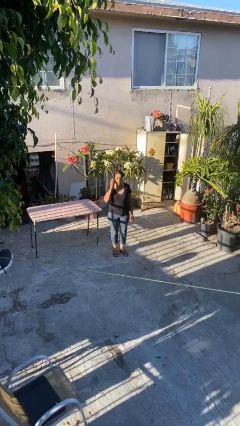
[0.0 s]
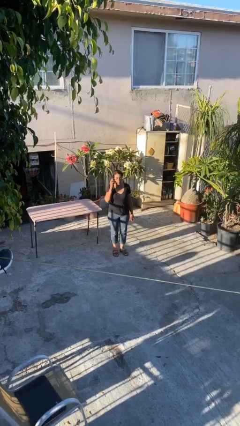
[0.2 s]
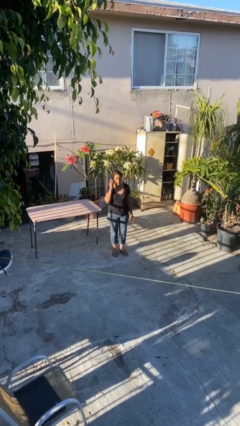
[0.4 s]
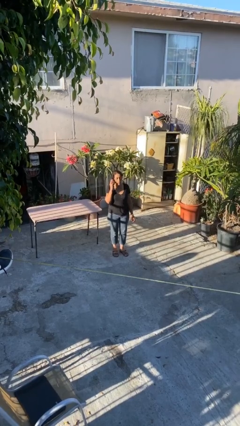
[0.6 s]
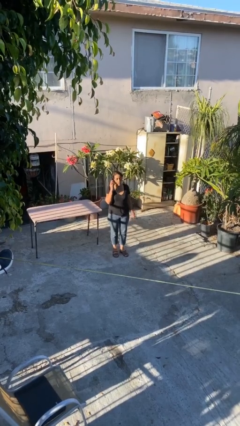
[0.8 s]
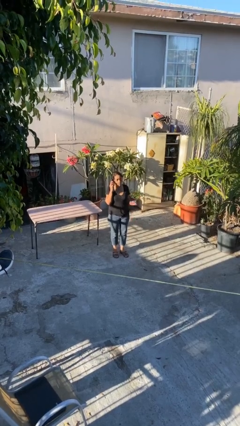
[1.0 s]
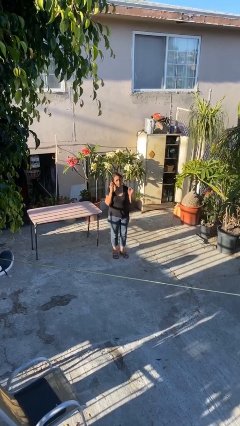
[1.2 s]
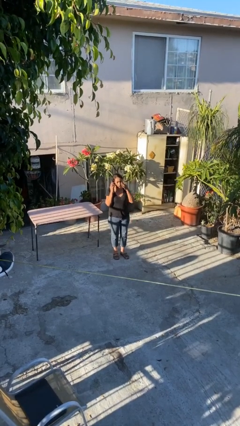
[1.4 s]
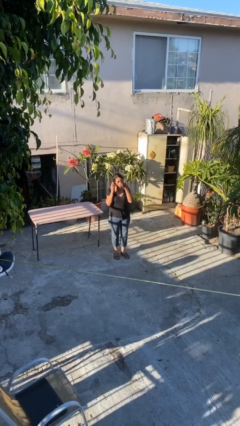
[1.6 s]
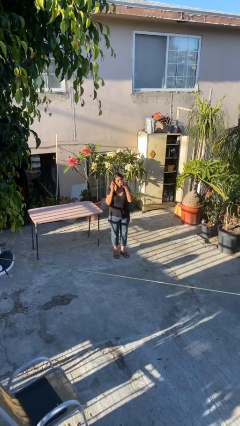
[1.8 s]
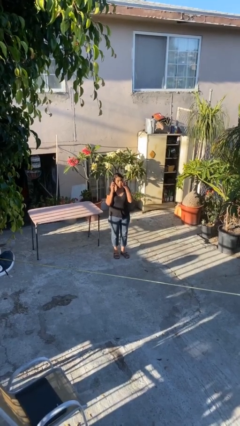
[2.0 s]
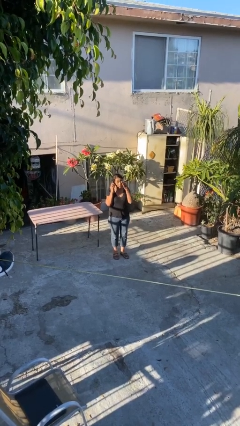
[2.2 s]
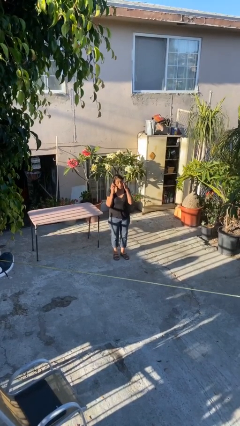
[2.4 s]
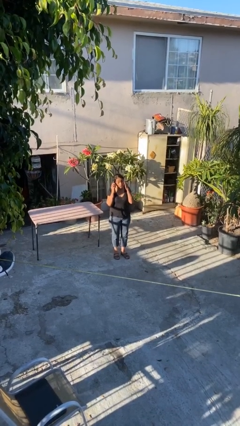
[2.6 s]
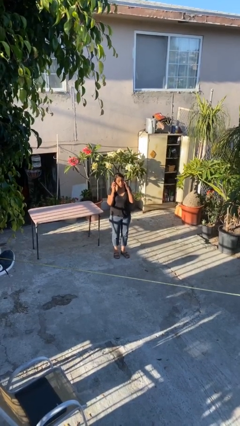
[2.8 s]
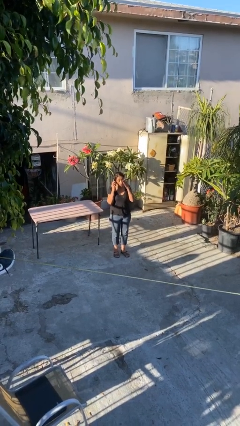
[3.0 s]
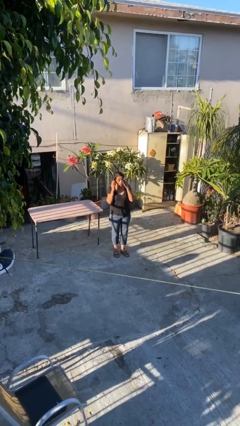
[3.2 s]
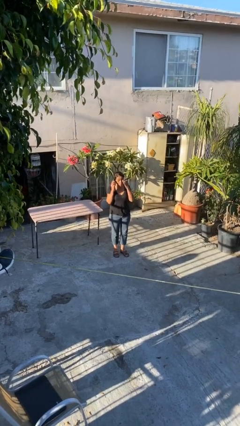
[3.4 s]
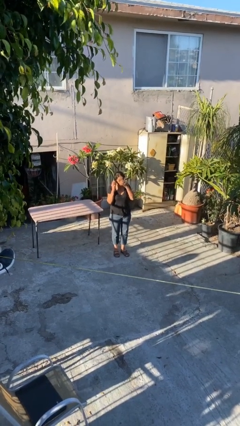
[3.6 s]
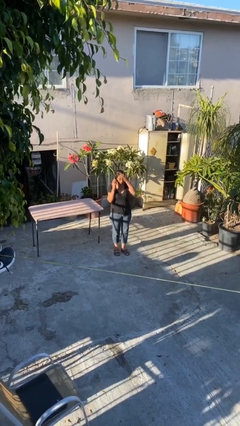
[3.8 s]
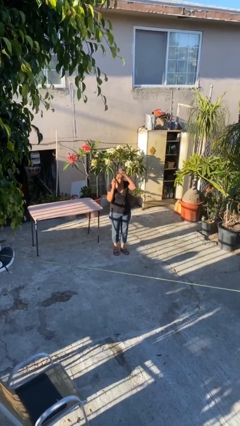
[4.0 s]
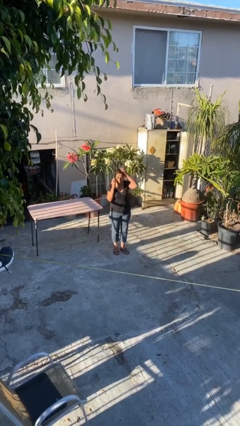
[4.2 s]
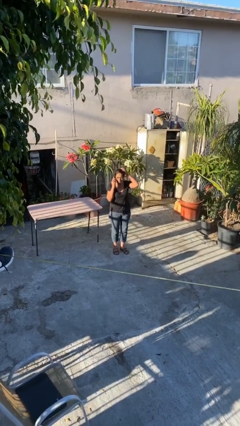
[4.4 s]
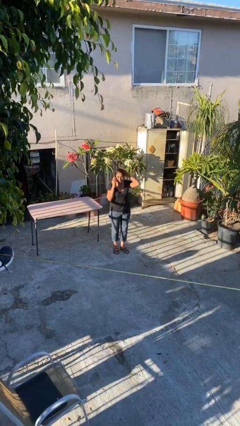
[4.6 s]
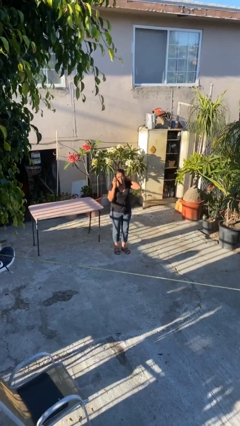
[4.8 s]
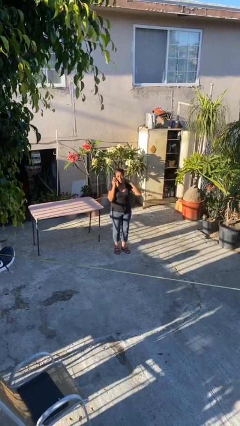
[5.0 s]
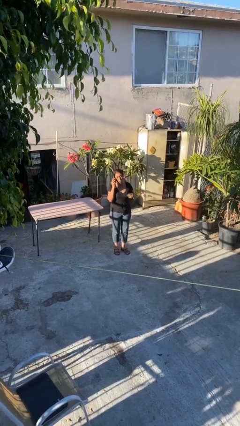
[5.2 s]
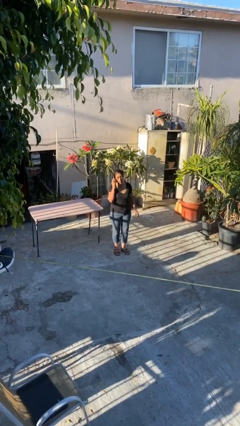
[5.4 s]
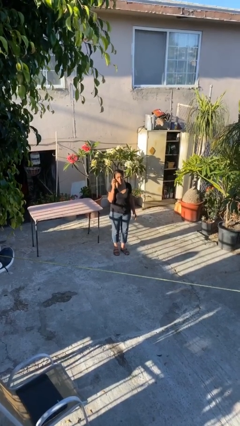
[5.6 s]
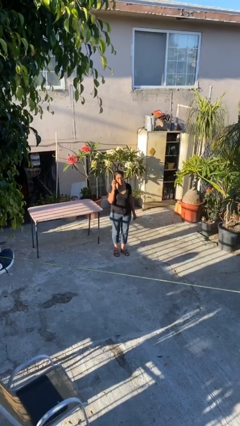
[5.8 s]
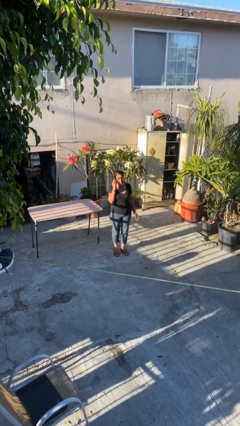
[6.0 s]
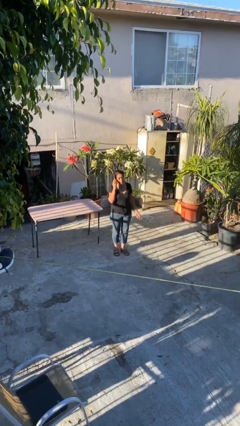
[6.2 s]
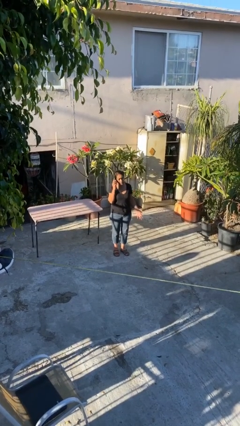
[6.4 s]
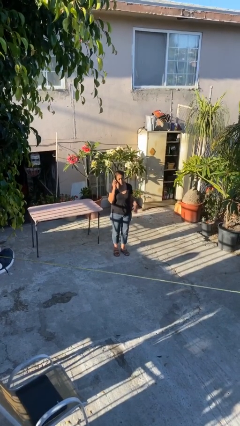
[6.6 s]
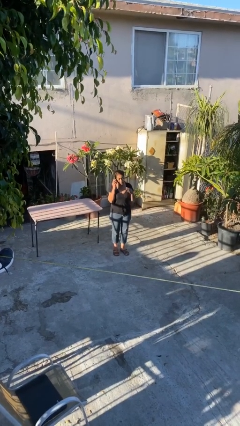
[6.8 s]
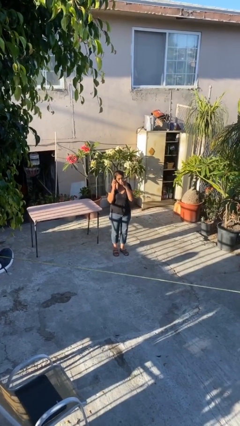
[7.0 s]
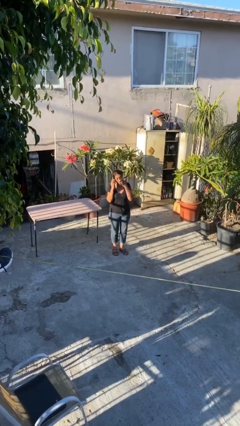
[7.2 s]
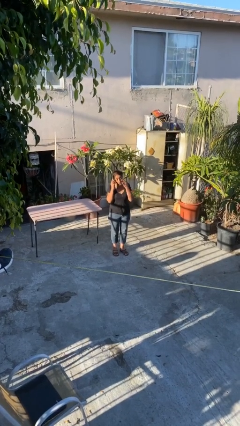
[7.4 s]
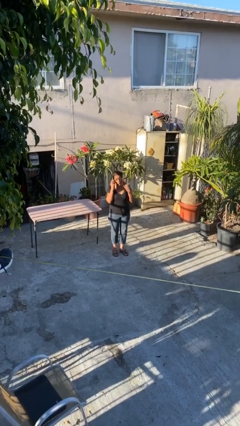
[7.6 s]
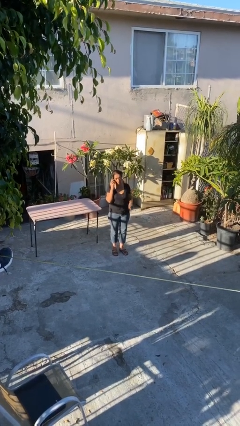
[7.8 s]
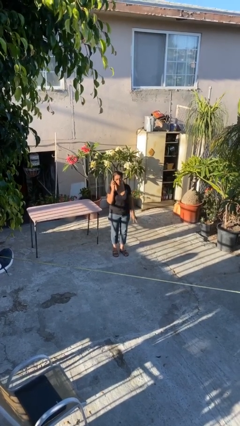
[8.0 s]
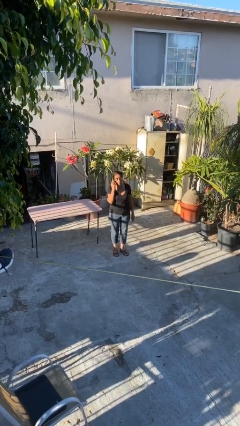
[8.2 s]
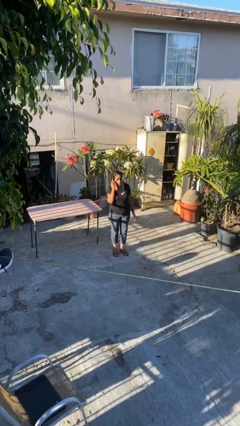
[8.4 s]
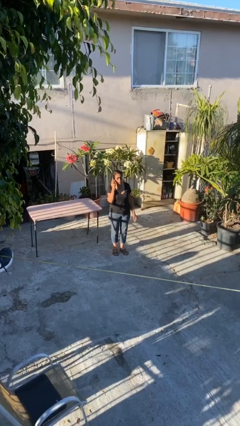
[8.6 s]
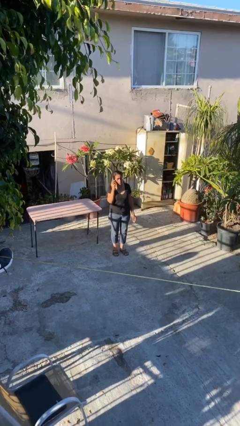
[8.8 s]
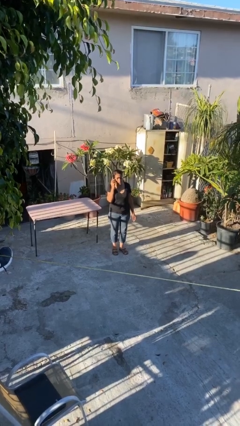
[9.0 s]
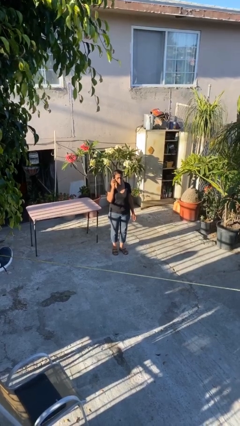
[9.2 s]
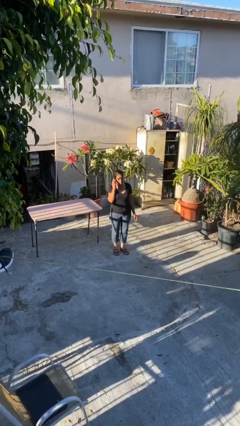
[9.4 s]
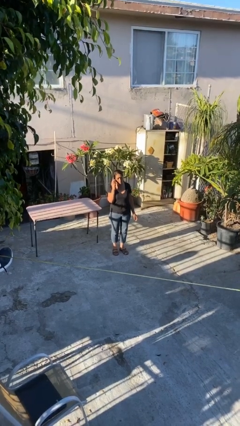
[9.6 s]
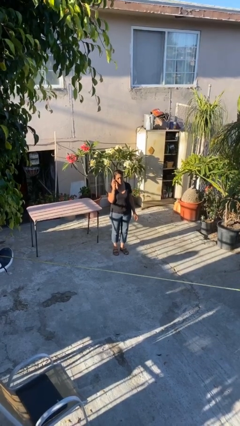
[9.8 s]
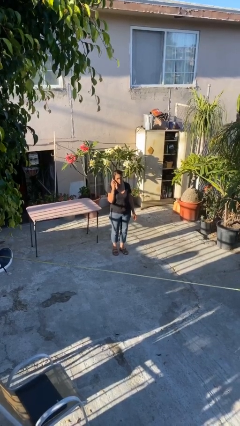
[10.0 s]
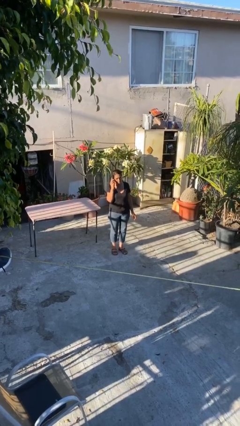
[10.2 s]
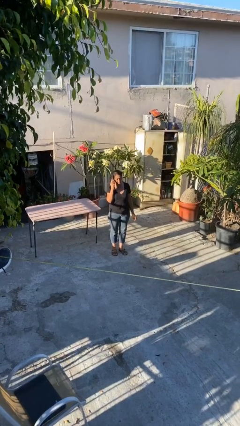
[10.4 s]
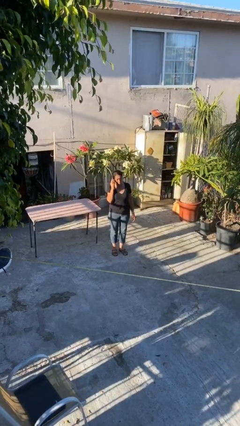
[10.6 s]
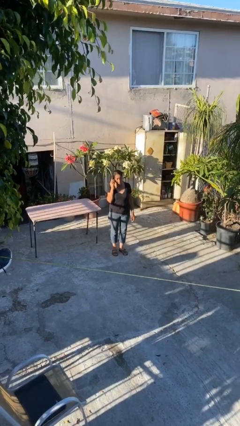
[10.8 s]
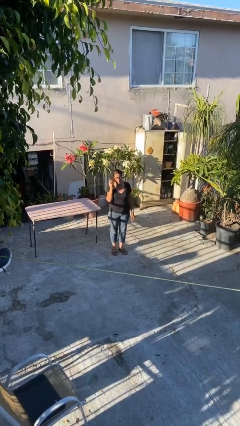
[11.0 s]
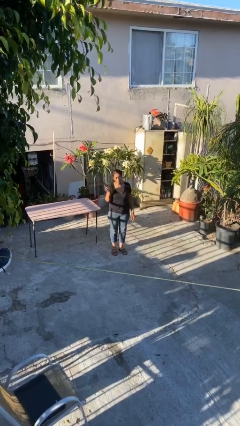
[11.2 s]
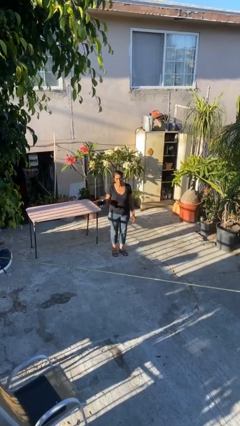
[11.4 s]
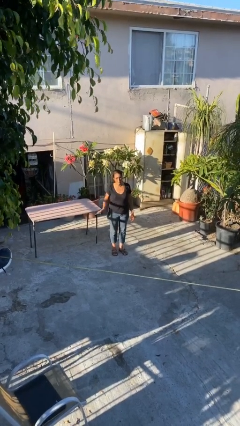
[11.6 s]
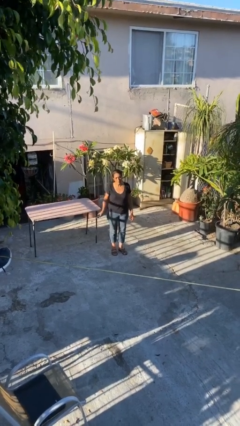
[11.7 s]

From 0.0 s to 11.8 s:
person talks on phone

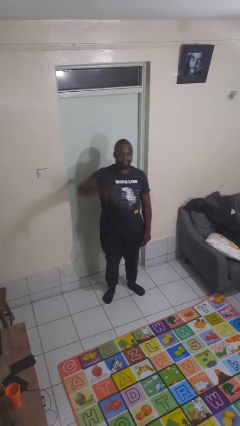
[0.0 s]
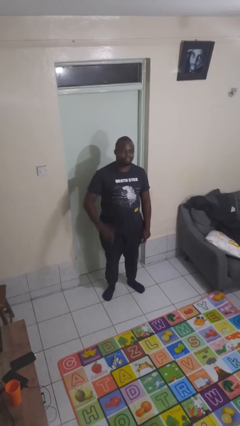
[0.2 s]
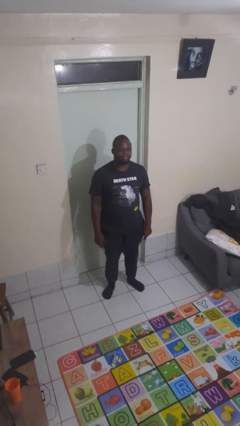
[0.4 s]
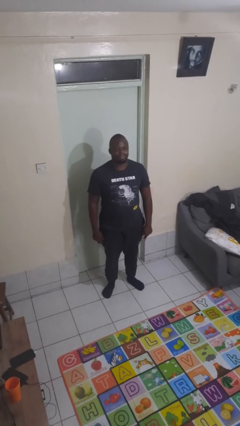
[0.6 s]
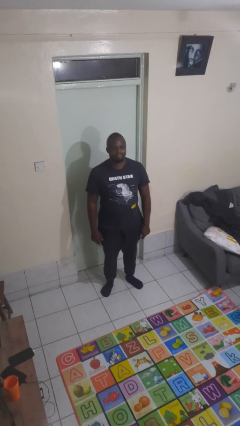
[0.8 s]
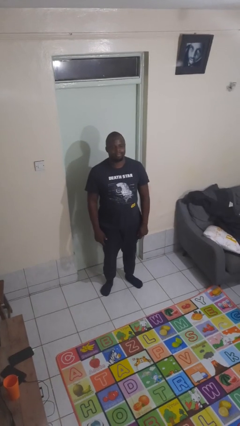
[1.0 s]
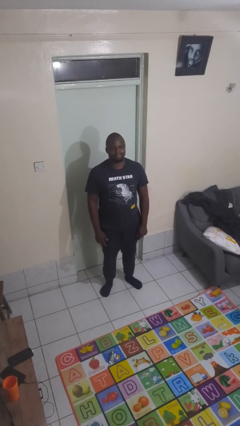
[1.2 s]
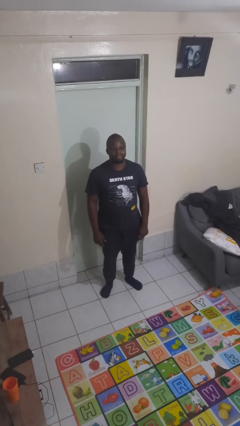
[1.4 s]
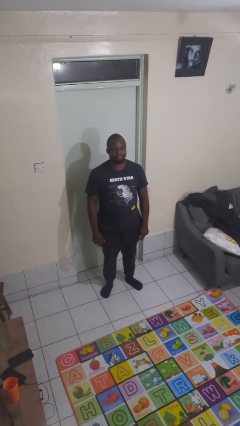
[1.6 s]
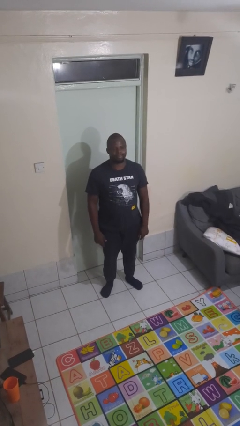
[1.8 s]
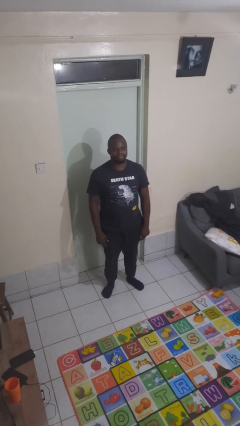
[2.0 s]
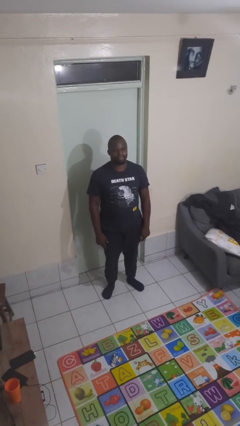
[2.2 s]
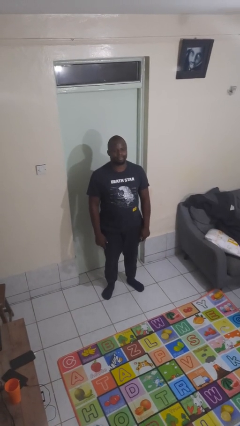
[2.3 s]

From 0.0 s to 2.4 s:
person gestures lower hand

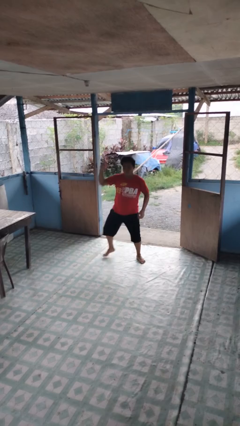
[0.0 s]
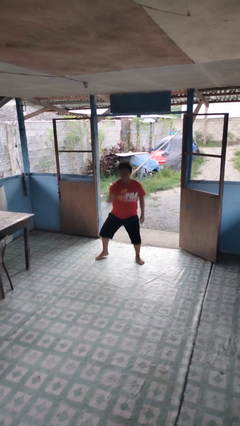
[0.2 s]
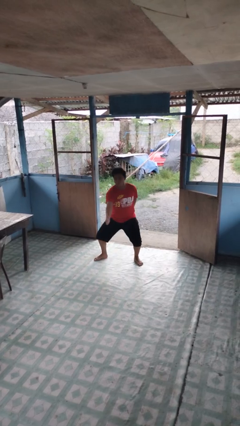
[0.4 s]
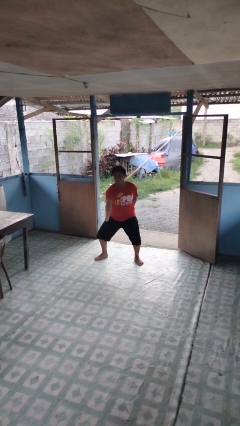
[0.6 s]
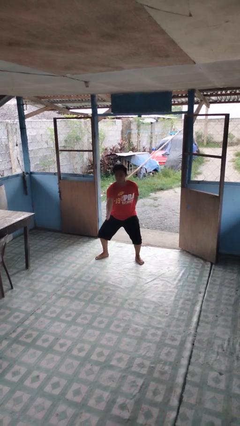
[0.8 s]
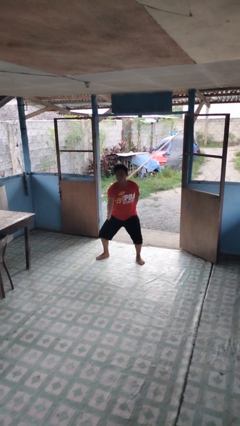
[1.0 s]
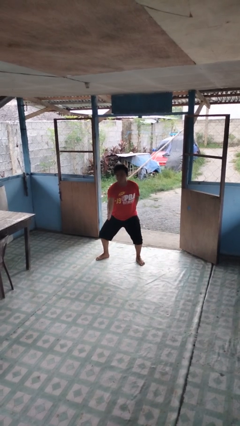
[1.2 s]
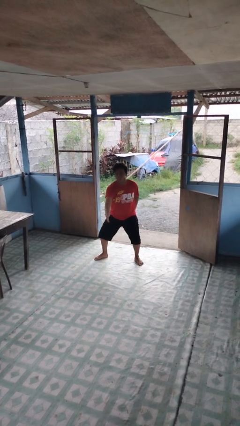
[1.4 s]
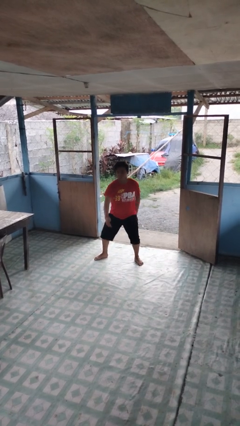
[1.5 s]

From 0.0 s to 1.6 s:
person karate chop

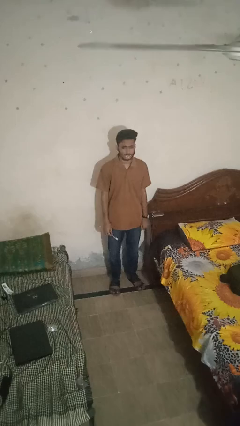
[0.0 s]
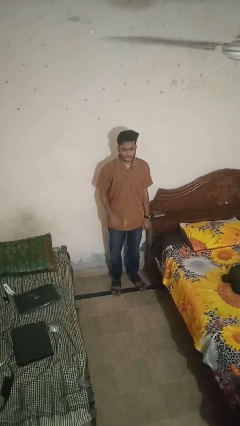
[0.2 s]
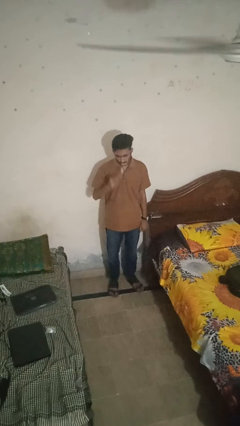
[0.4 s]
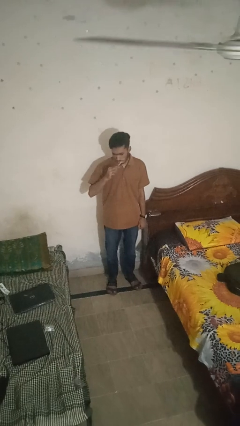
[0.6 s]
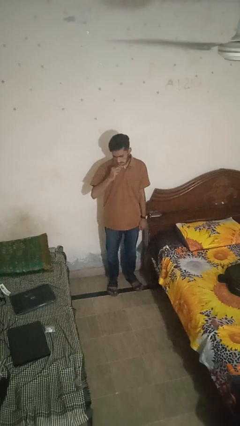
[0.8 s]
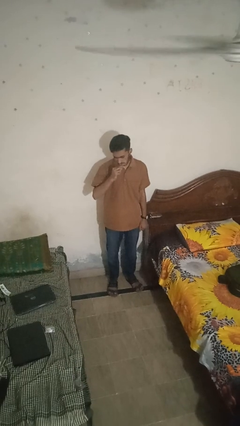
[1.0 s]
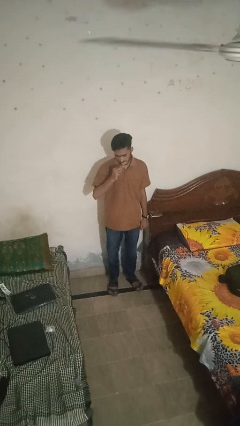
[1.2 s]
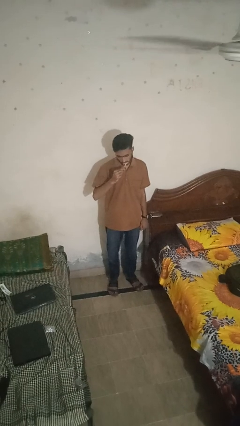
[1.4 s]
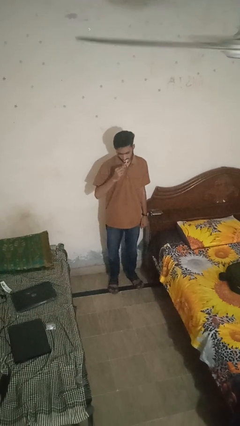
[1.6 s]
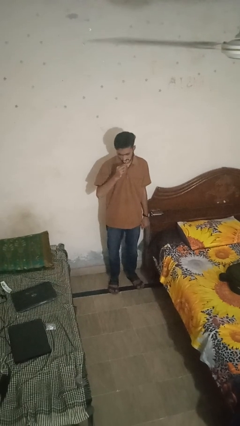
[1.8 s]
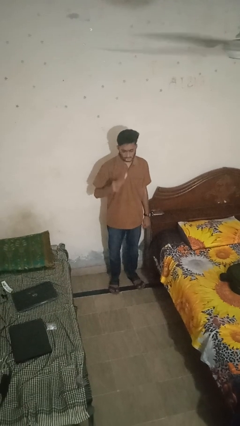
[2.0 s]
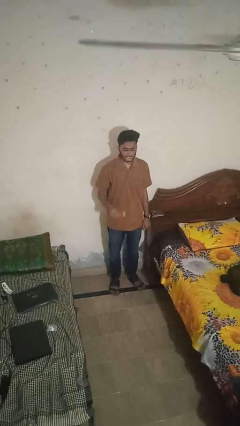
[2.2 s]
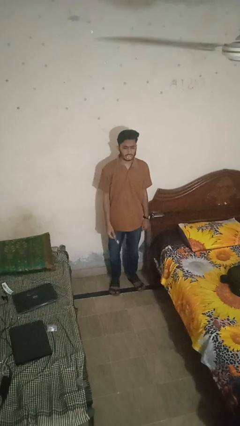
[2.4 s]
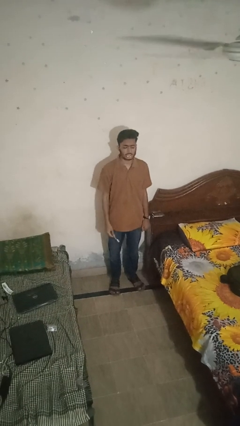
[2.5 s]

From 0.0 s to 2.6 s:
person brushes teeth
